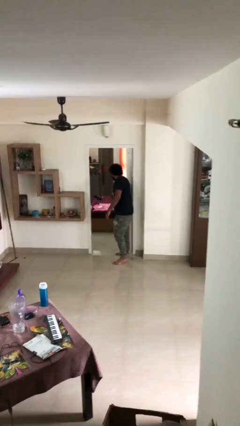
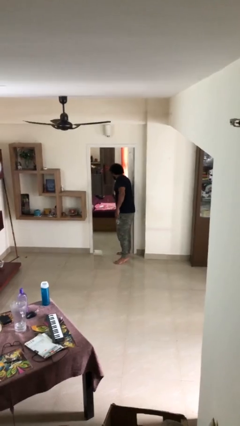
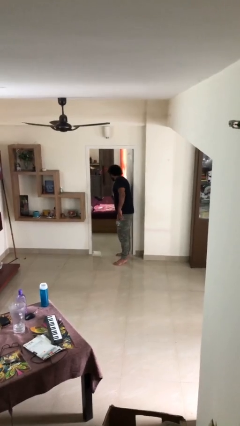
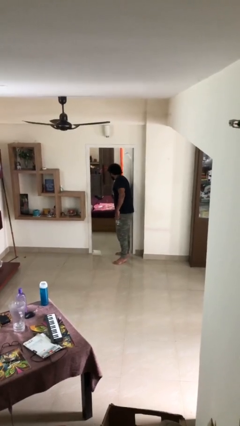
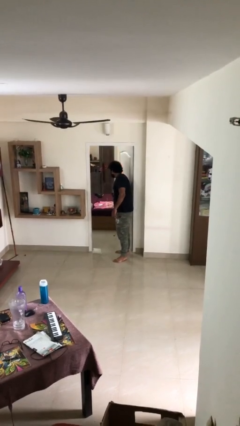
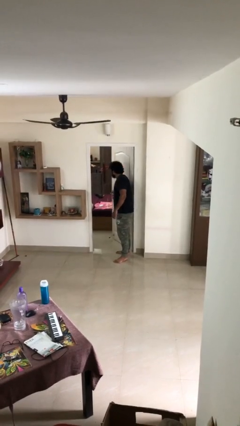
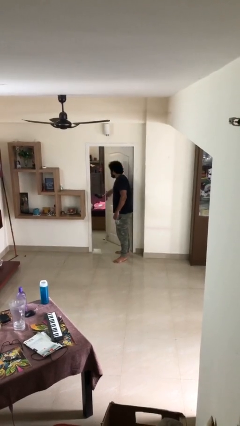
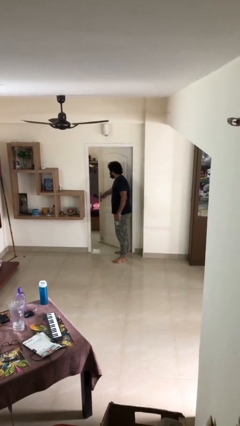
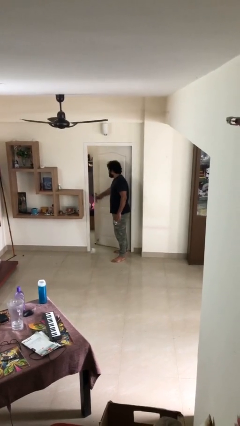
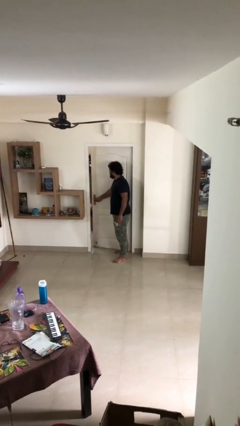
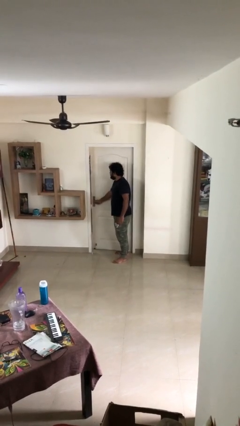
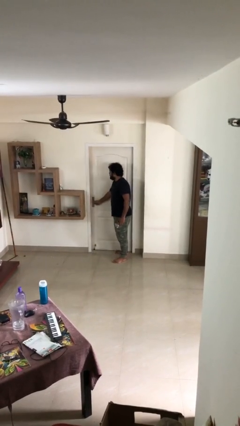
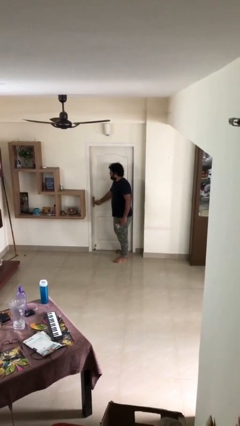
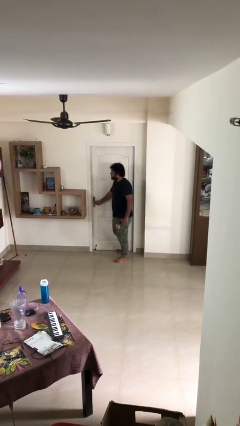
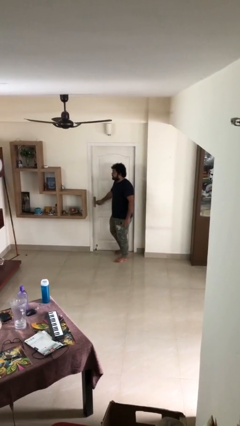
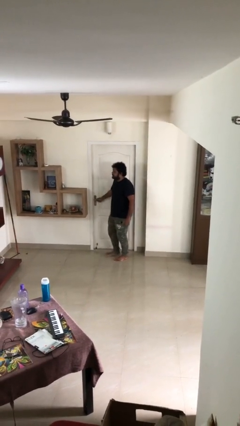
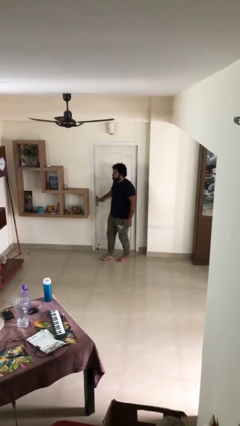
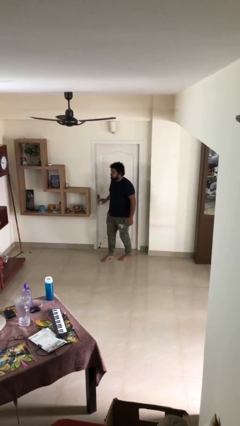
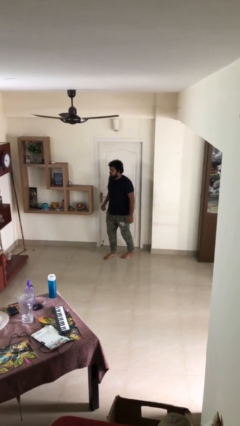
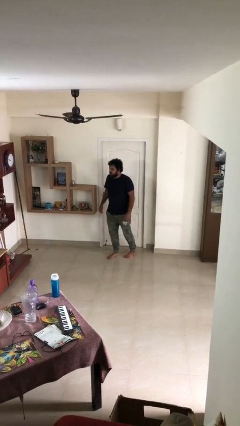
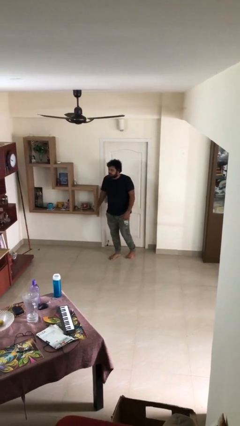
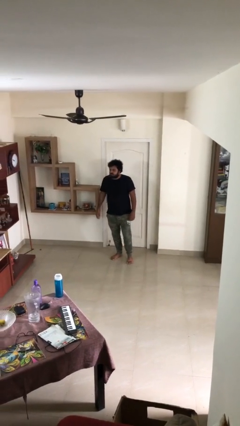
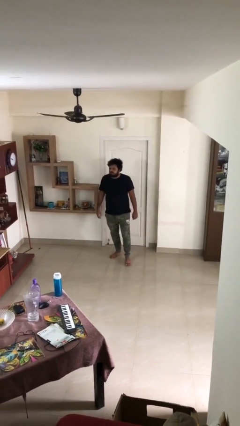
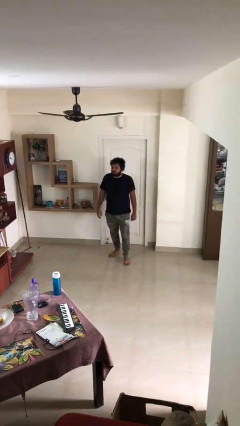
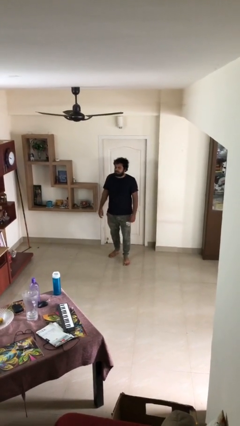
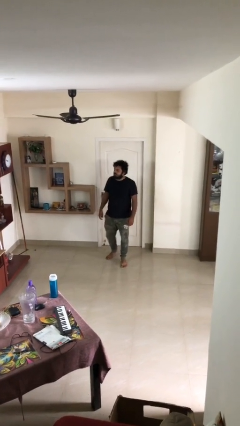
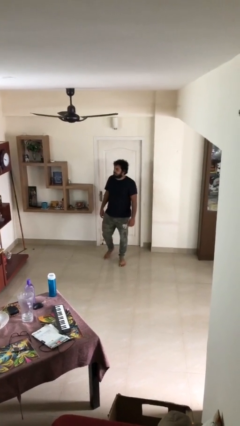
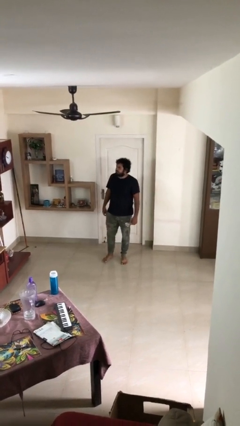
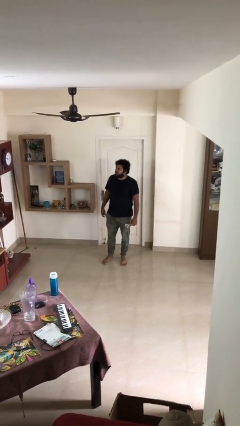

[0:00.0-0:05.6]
person closes facility door

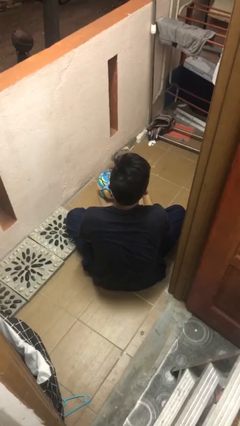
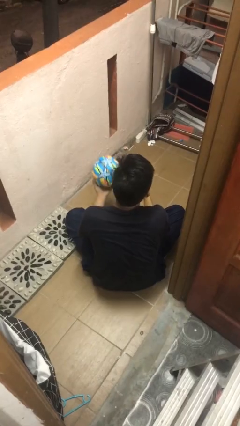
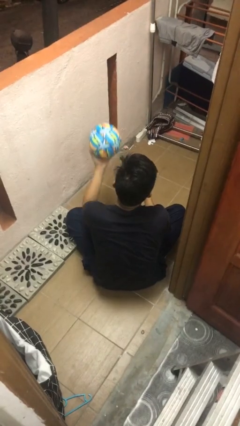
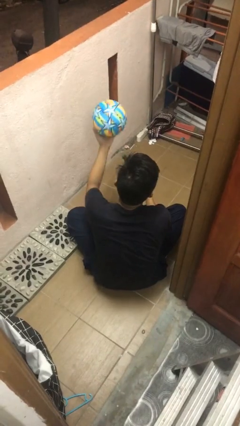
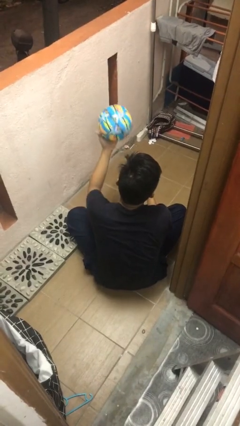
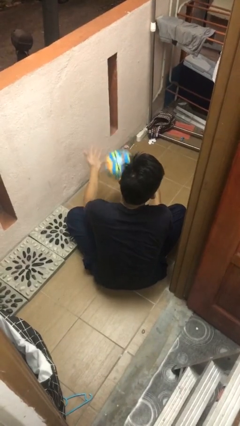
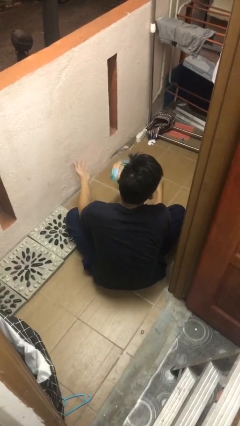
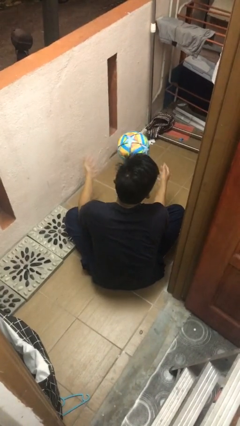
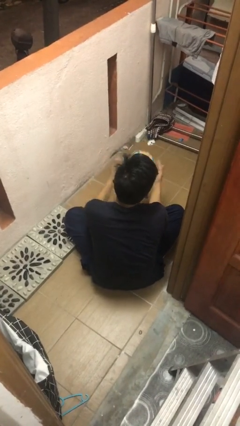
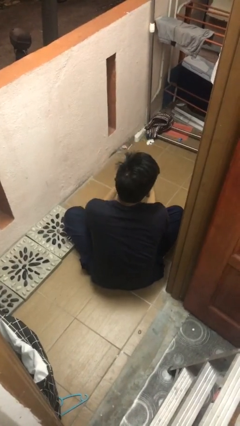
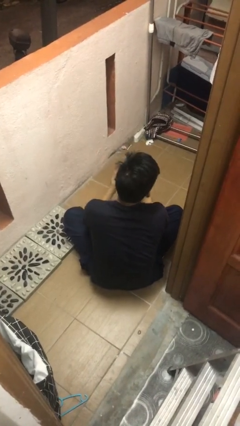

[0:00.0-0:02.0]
person bounces ball on floor

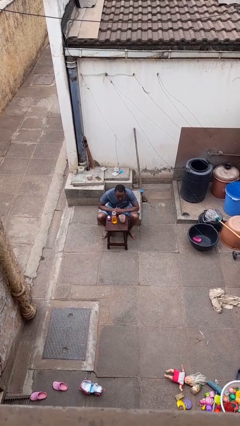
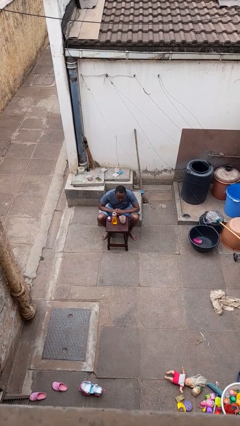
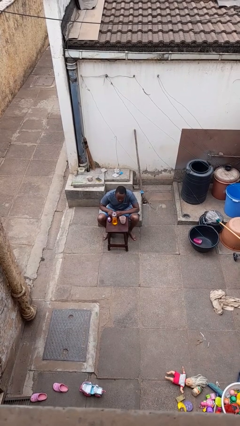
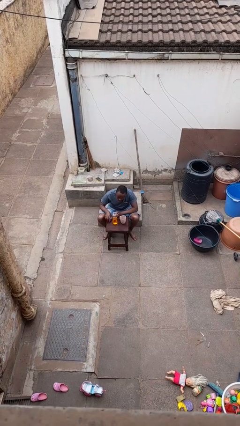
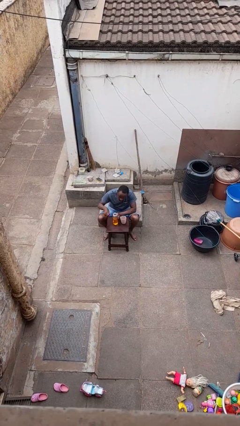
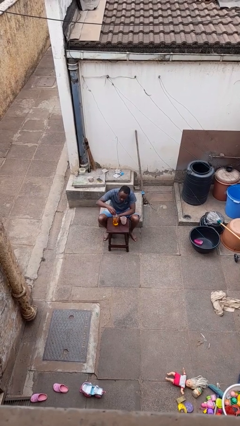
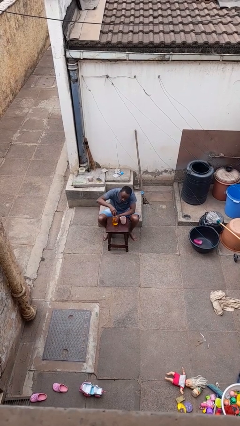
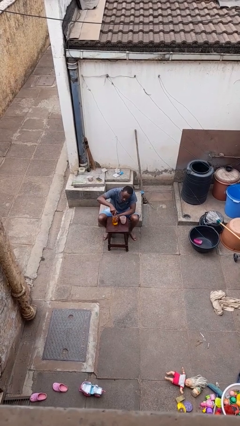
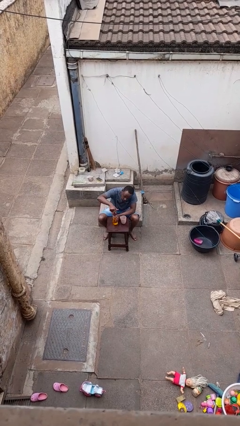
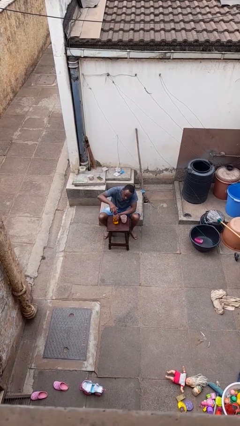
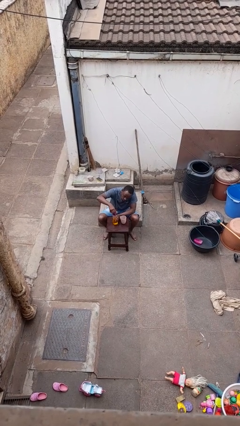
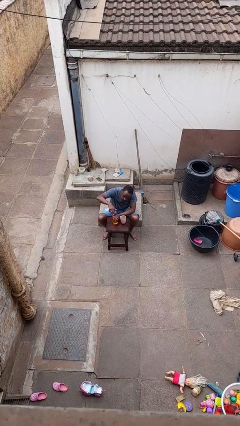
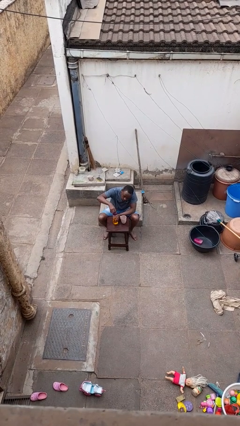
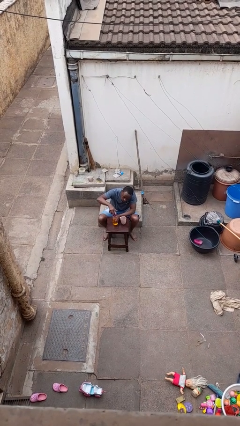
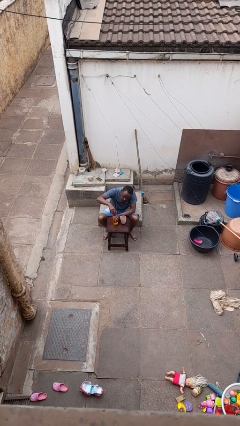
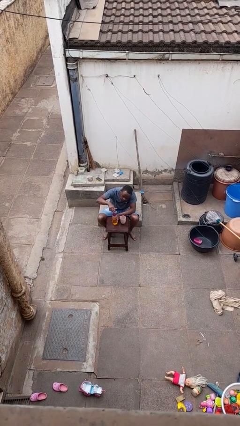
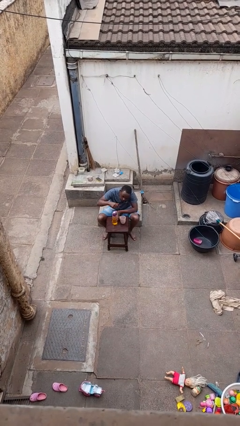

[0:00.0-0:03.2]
person screws lid to bottle

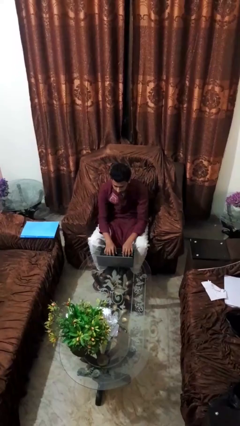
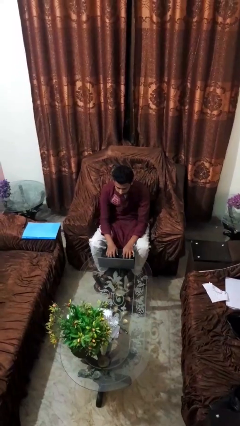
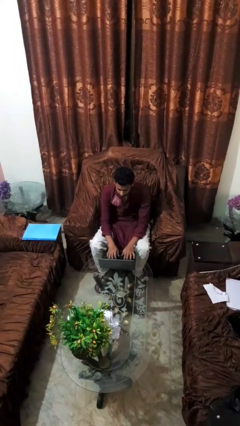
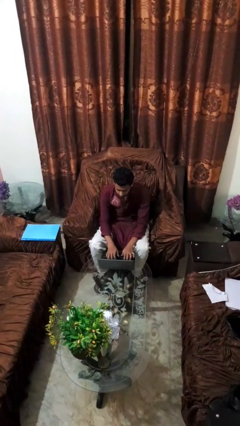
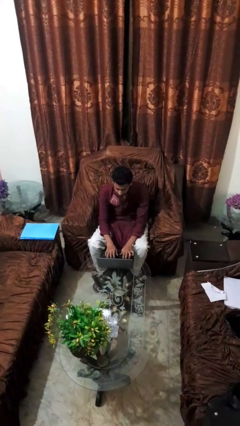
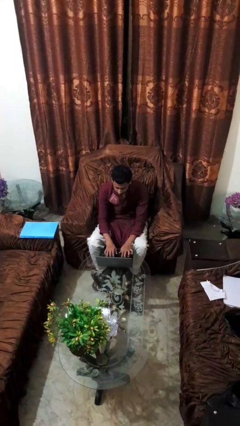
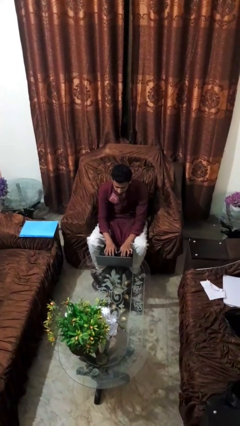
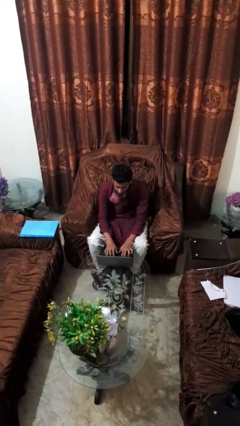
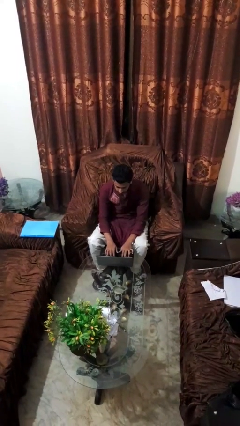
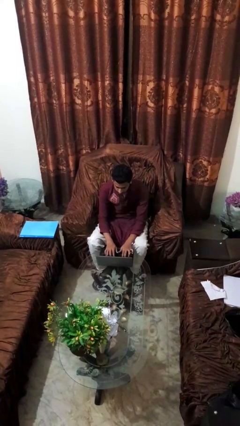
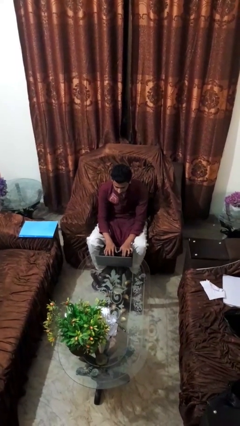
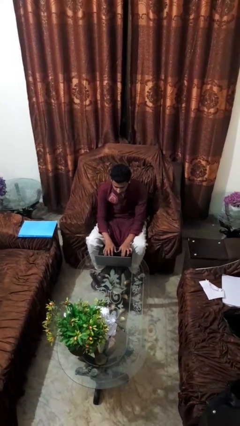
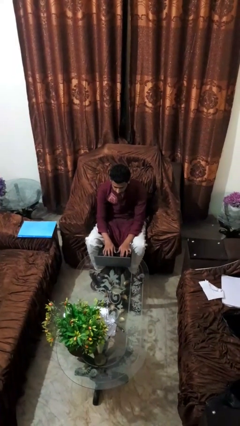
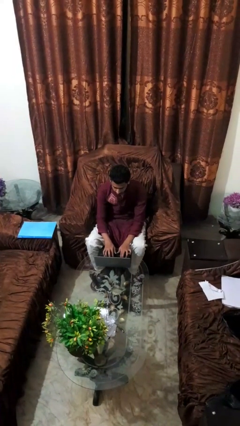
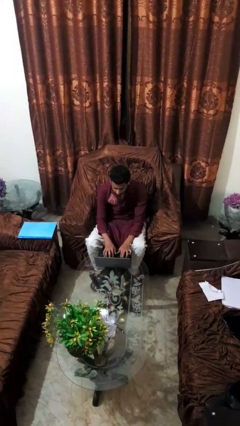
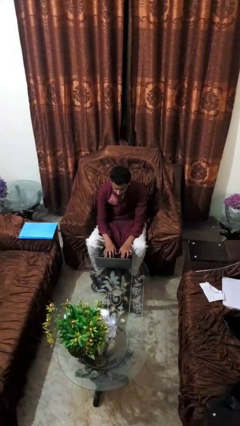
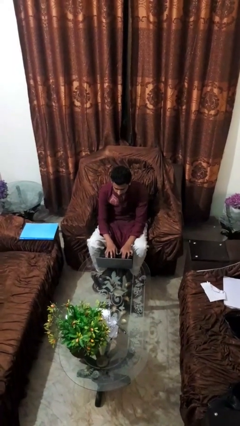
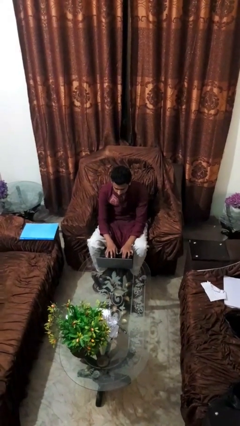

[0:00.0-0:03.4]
person interacts with laptop

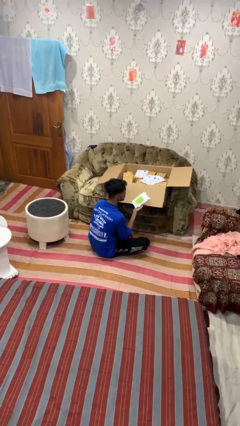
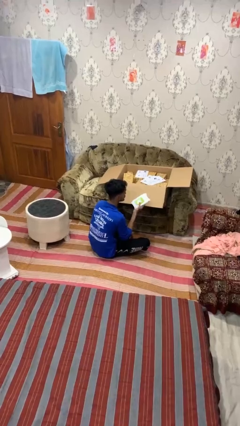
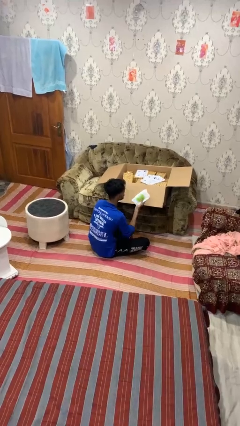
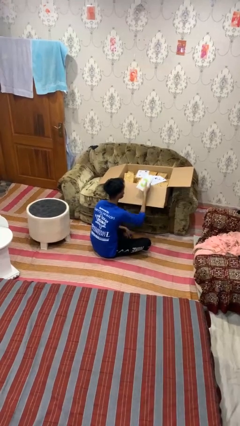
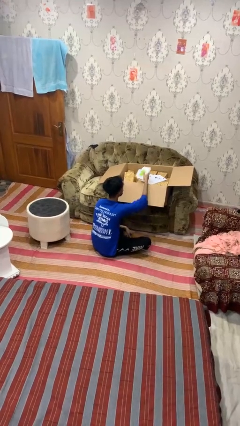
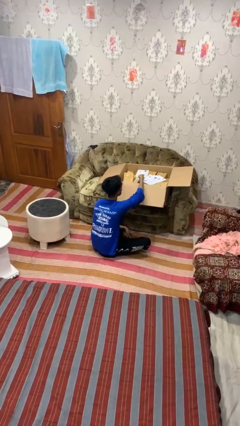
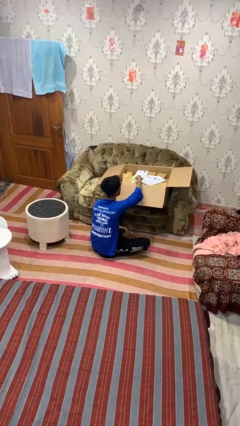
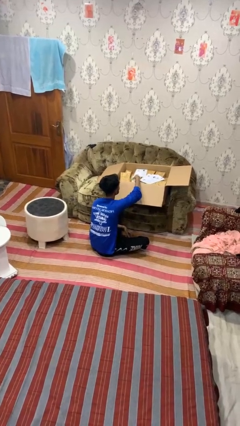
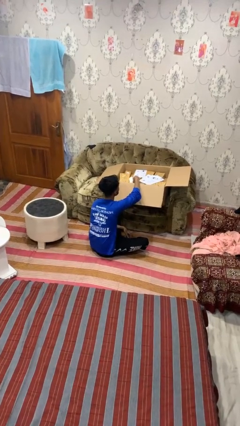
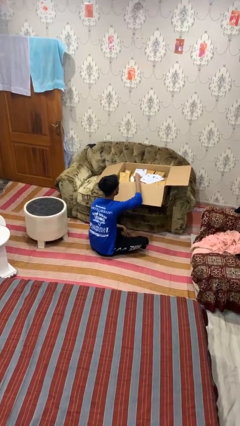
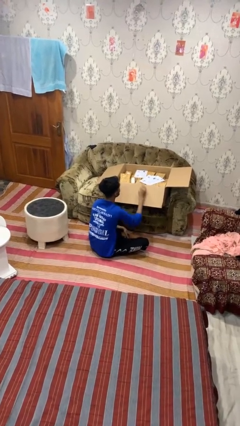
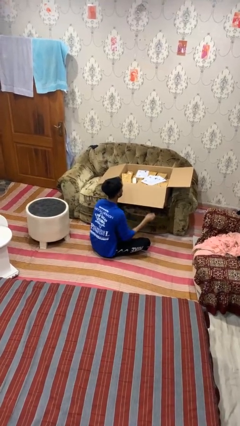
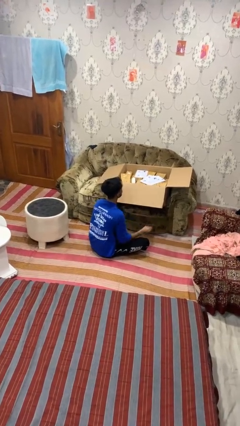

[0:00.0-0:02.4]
person puts object into box

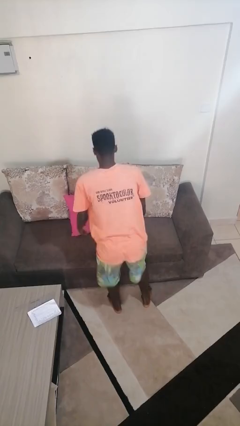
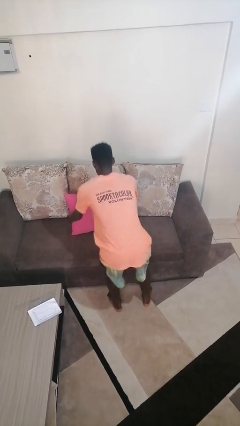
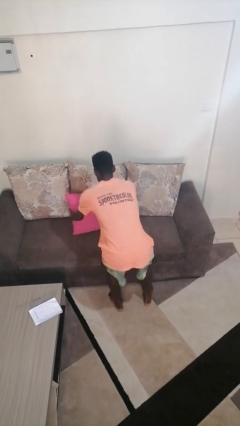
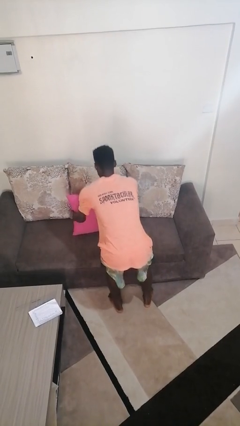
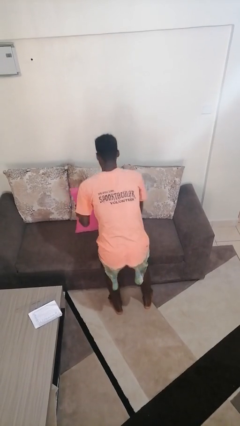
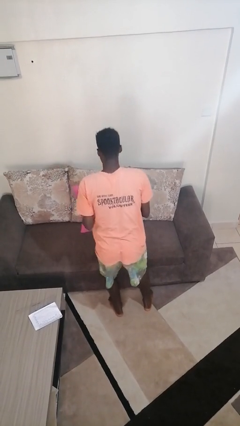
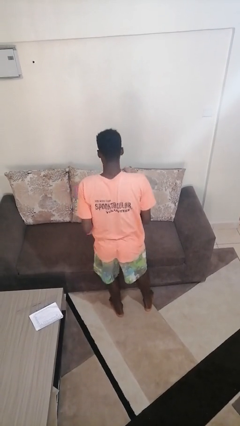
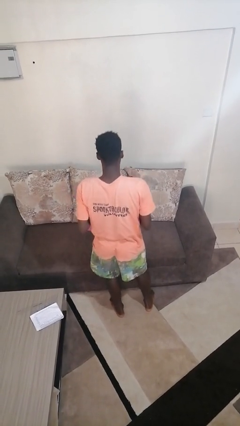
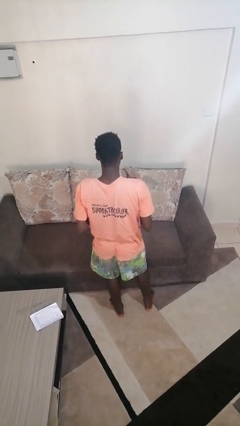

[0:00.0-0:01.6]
person picks up object from couch
